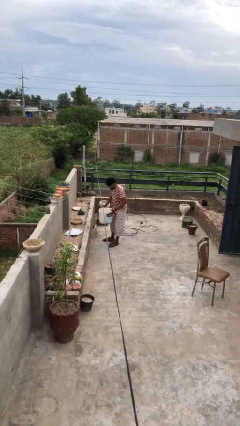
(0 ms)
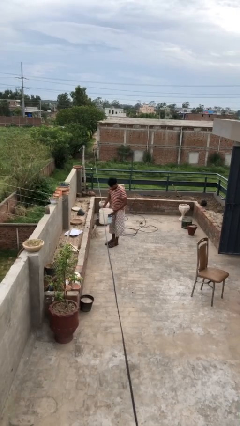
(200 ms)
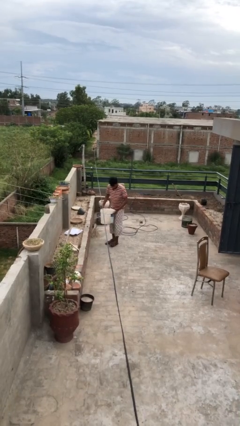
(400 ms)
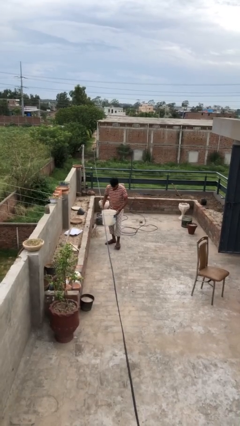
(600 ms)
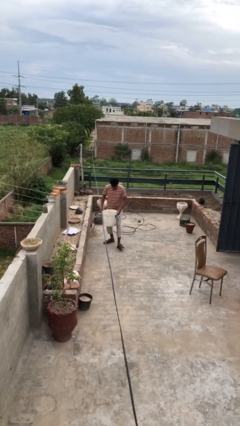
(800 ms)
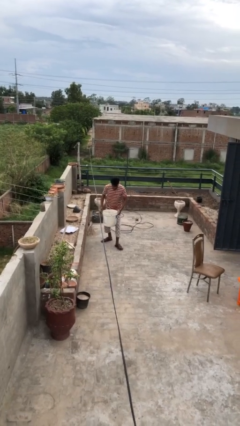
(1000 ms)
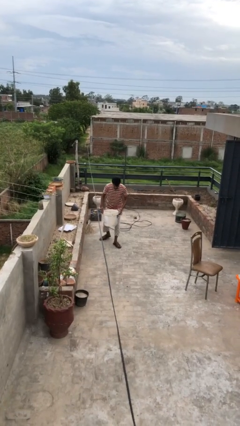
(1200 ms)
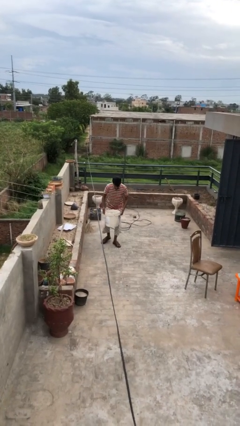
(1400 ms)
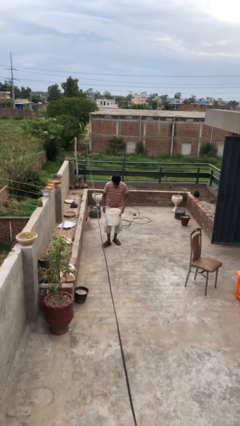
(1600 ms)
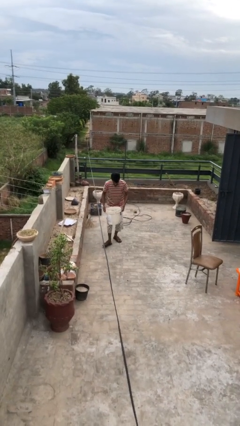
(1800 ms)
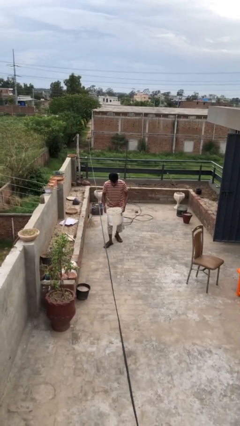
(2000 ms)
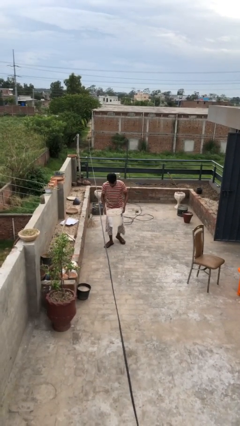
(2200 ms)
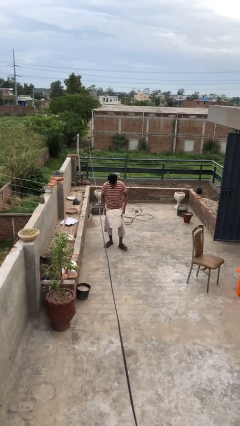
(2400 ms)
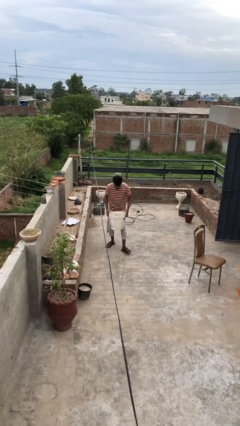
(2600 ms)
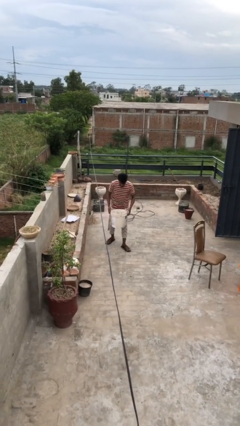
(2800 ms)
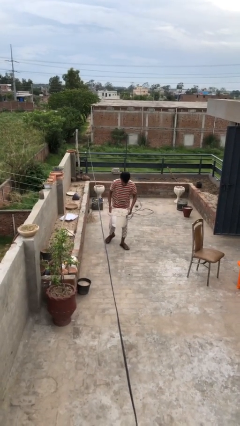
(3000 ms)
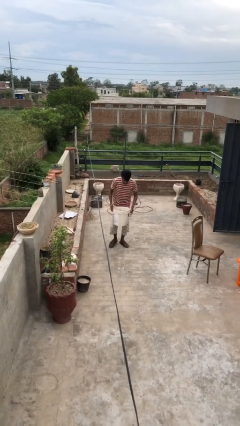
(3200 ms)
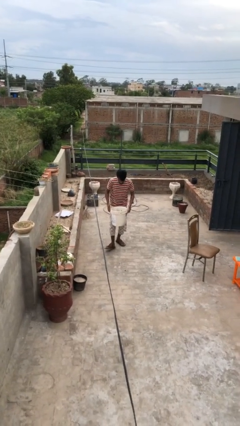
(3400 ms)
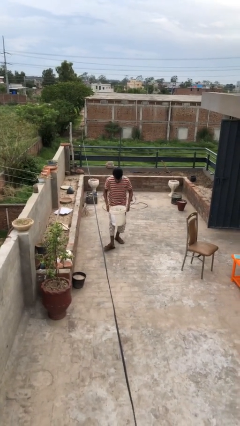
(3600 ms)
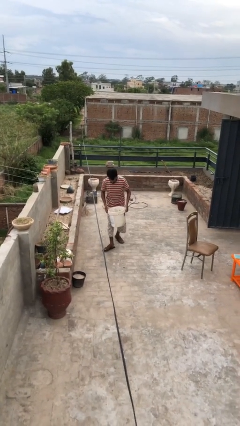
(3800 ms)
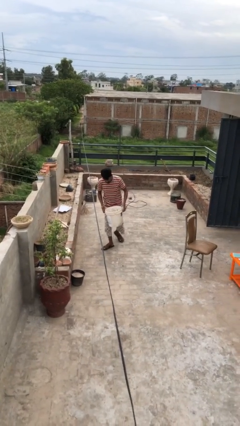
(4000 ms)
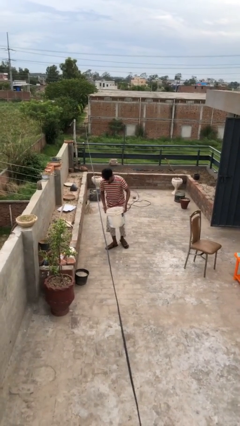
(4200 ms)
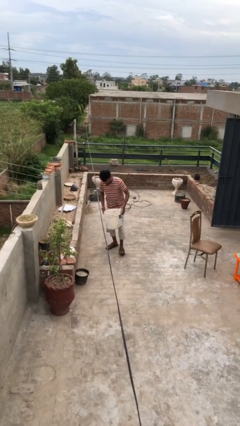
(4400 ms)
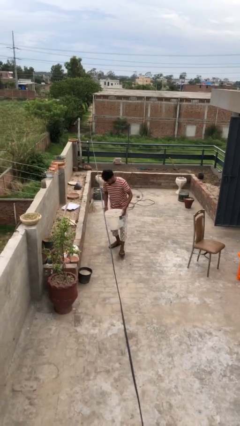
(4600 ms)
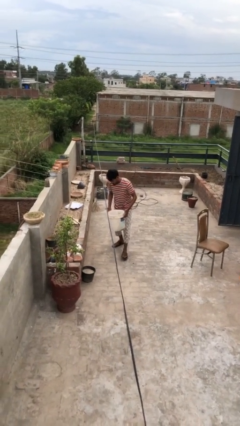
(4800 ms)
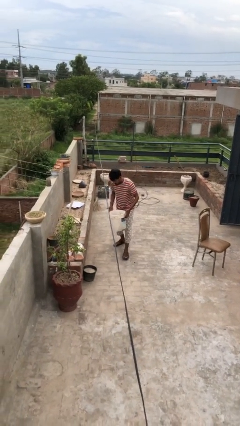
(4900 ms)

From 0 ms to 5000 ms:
person carries heavy object

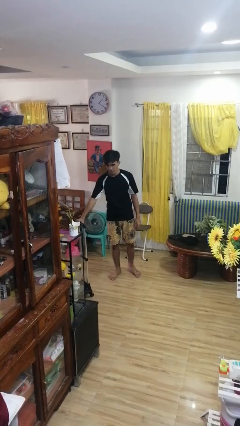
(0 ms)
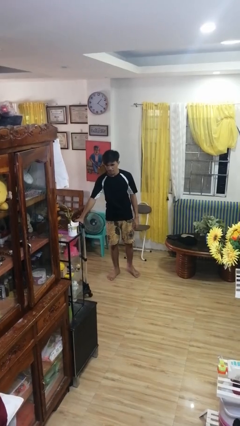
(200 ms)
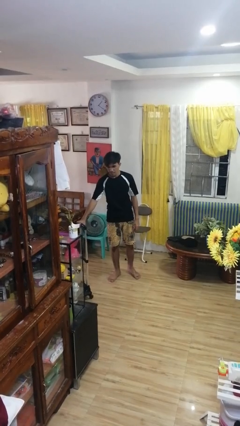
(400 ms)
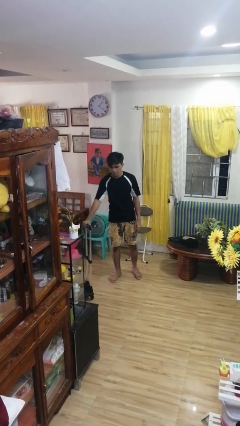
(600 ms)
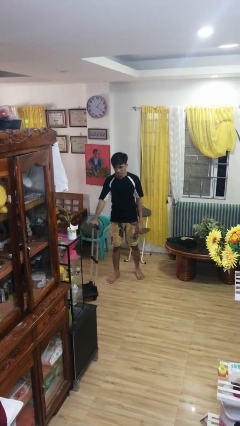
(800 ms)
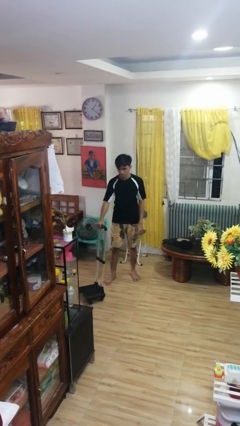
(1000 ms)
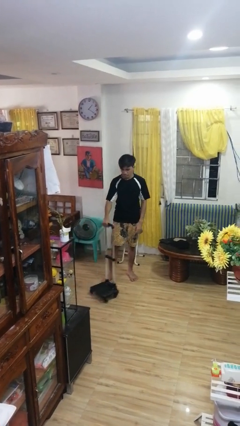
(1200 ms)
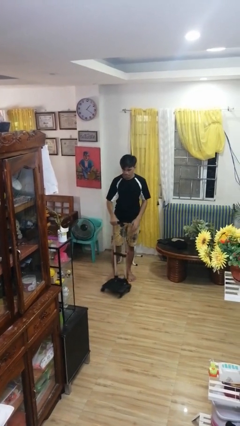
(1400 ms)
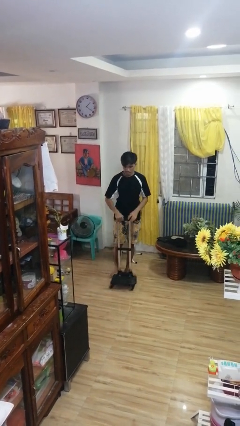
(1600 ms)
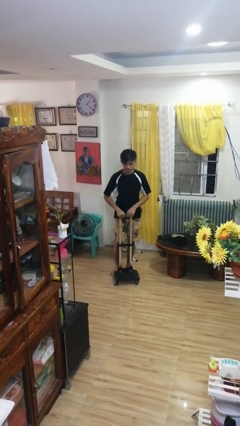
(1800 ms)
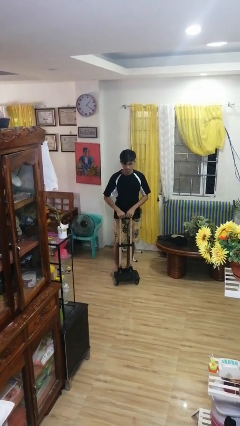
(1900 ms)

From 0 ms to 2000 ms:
person pulls wheeled cart

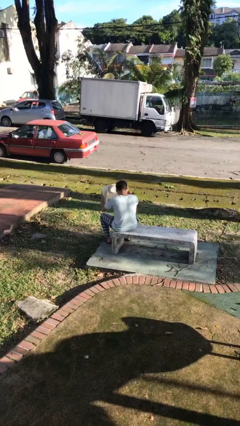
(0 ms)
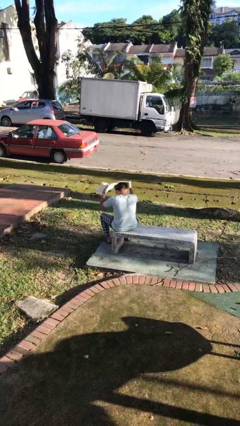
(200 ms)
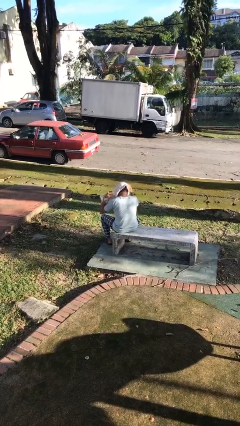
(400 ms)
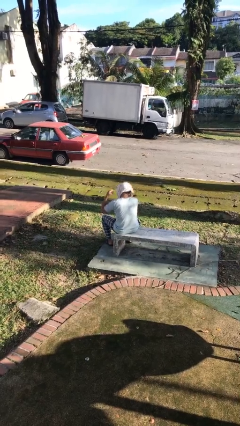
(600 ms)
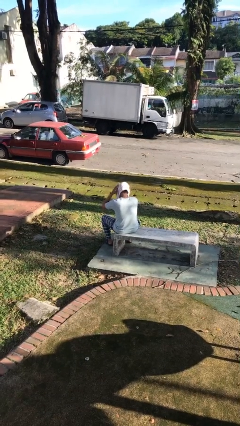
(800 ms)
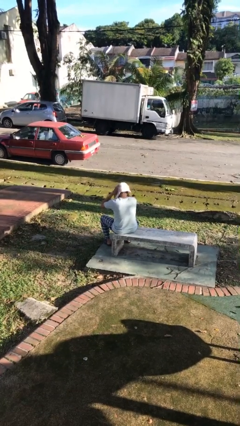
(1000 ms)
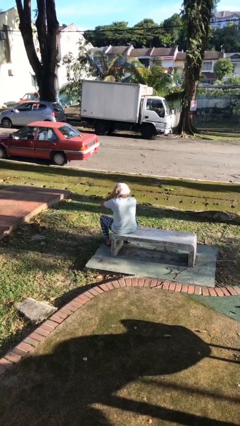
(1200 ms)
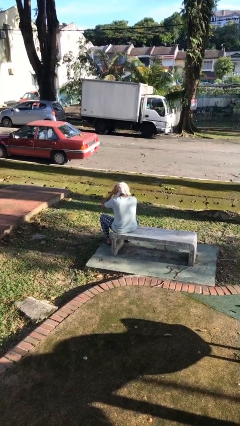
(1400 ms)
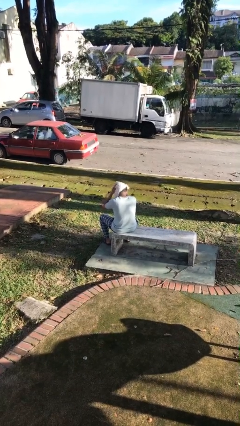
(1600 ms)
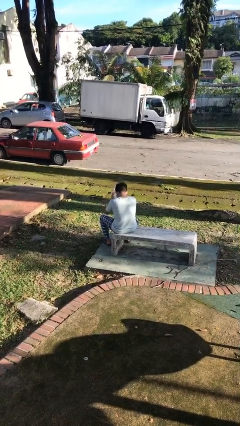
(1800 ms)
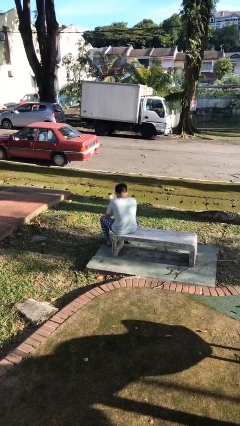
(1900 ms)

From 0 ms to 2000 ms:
person dries hair with towel

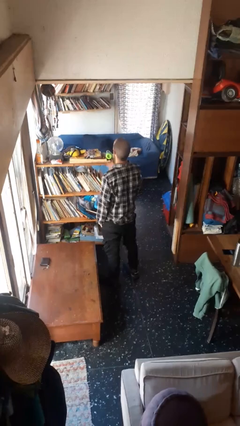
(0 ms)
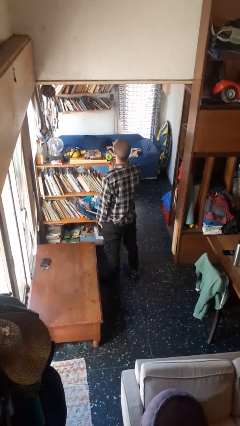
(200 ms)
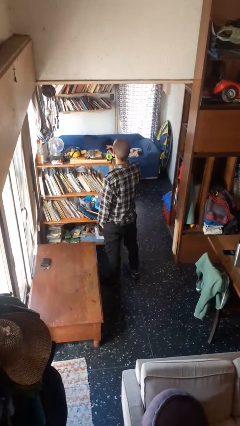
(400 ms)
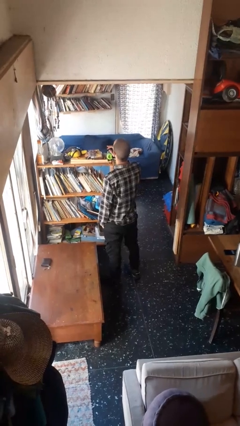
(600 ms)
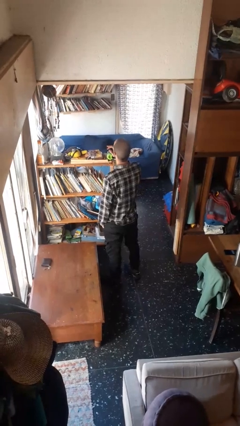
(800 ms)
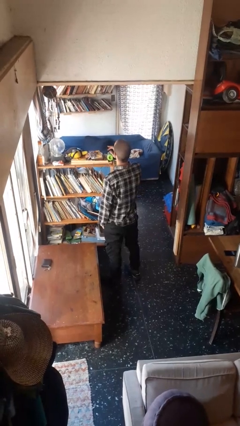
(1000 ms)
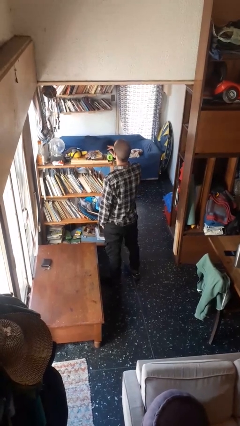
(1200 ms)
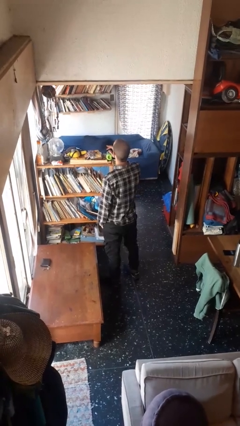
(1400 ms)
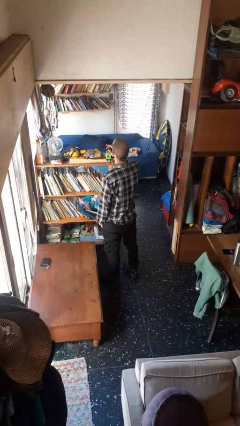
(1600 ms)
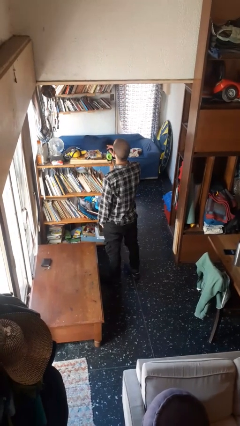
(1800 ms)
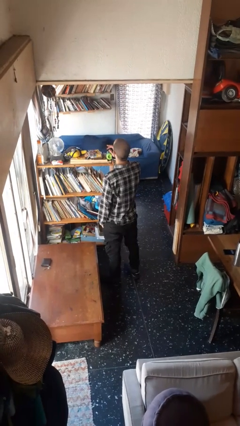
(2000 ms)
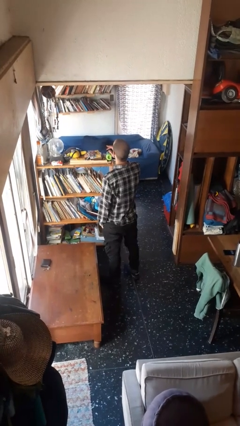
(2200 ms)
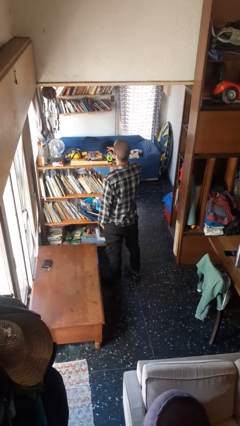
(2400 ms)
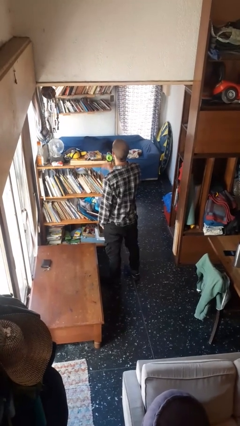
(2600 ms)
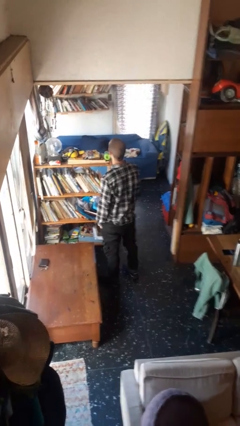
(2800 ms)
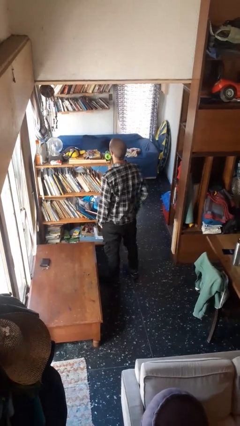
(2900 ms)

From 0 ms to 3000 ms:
person gestures be quiet

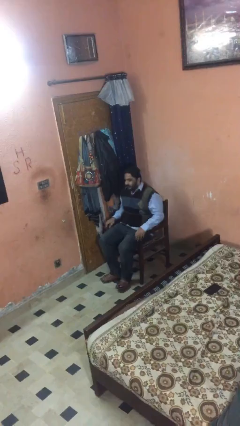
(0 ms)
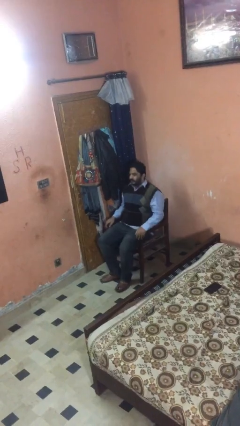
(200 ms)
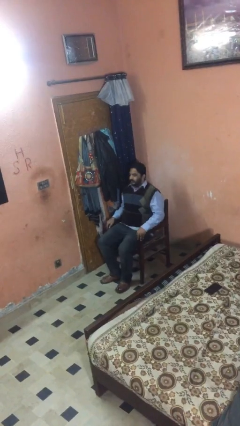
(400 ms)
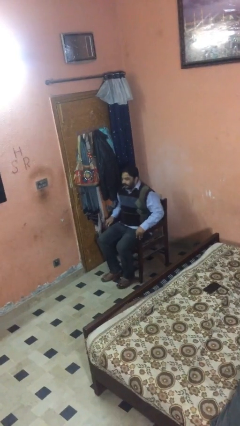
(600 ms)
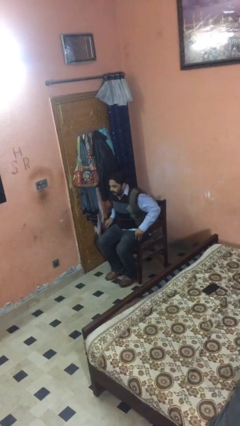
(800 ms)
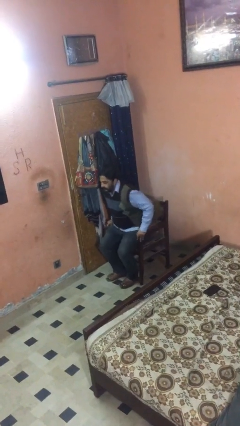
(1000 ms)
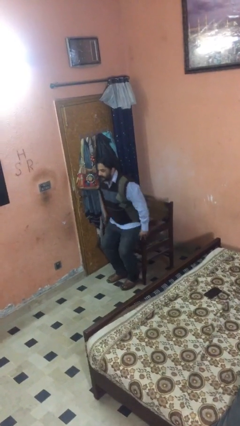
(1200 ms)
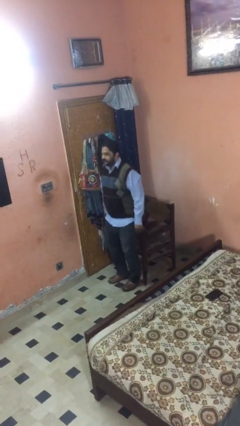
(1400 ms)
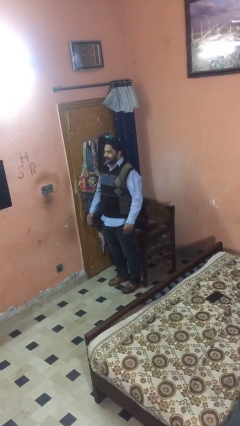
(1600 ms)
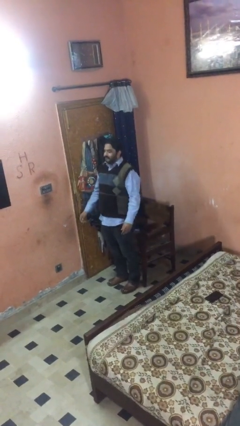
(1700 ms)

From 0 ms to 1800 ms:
person stands up

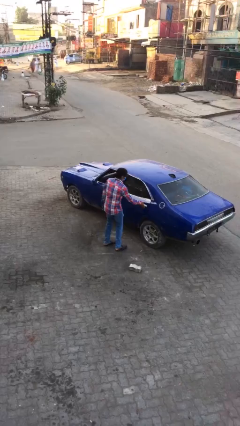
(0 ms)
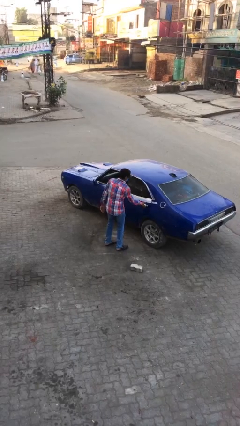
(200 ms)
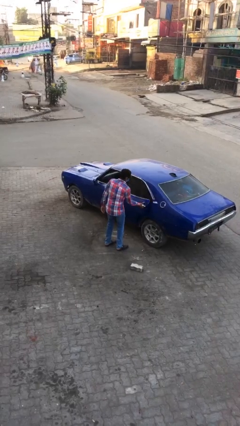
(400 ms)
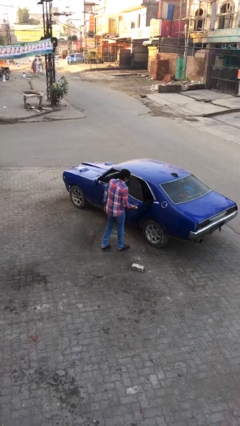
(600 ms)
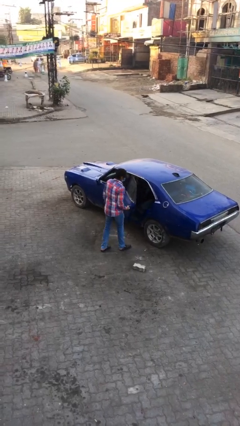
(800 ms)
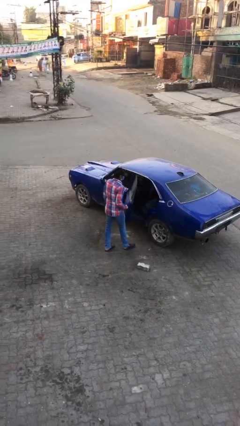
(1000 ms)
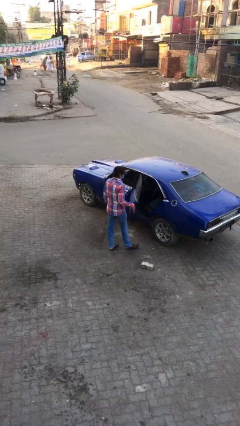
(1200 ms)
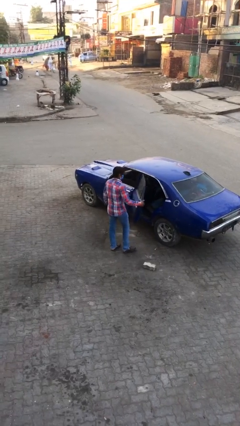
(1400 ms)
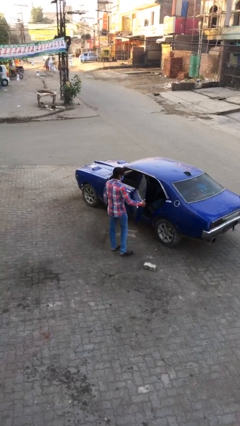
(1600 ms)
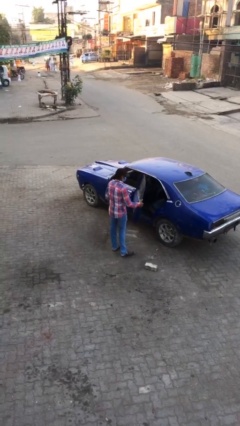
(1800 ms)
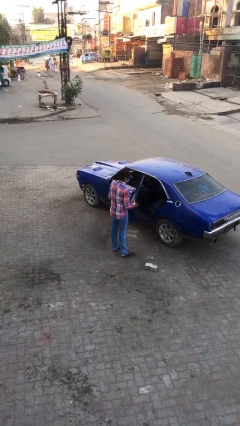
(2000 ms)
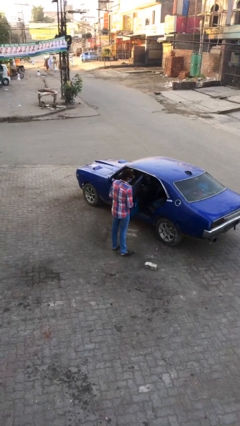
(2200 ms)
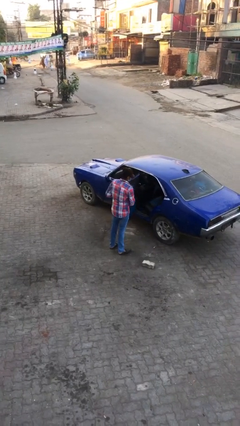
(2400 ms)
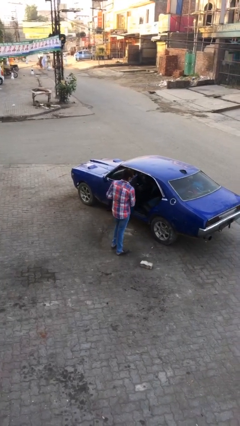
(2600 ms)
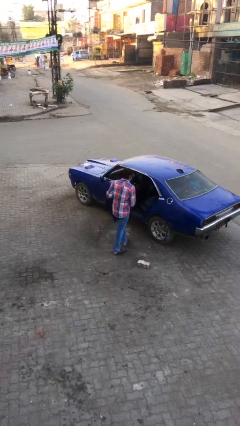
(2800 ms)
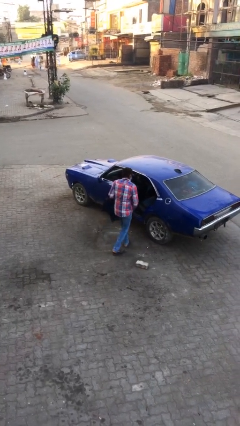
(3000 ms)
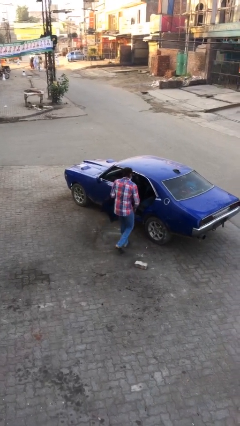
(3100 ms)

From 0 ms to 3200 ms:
person opens car door
